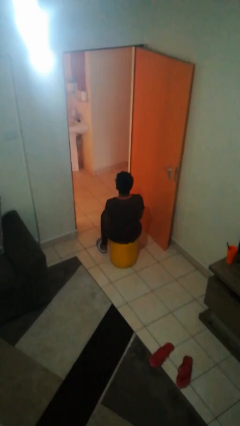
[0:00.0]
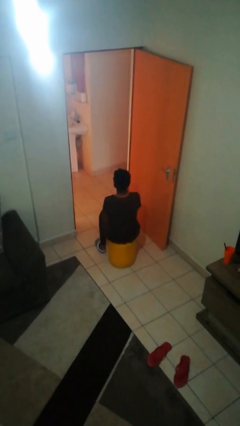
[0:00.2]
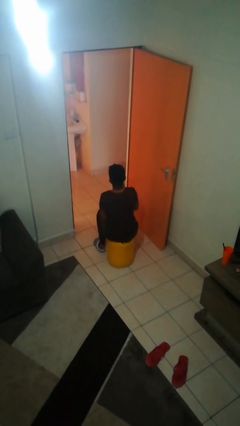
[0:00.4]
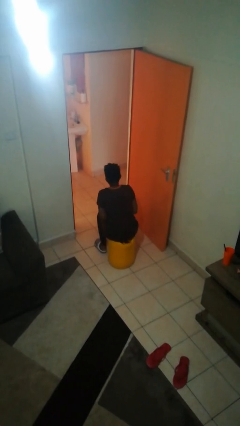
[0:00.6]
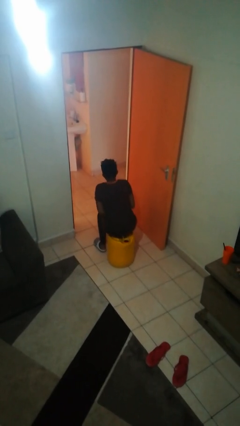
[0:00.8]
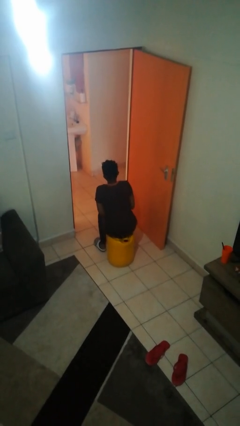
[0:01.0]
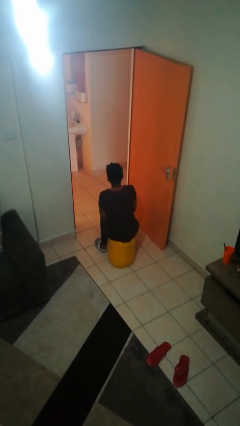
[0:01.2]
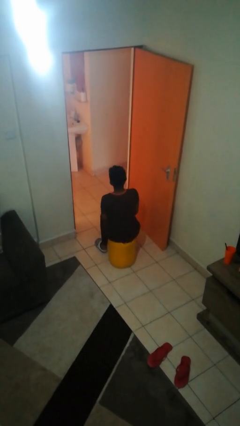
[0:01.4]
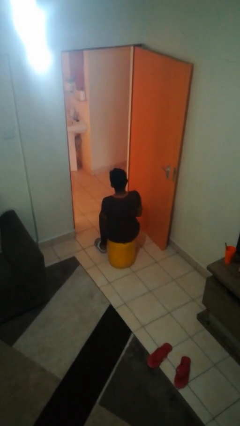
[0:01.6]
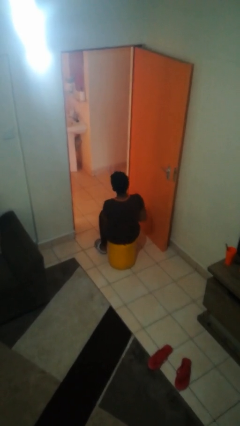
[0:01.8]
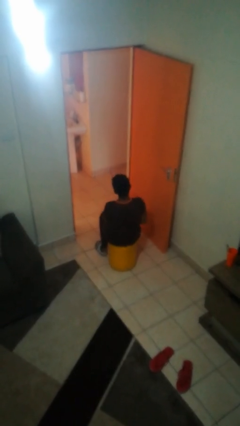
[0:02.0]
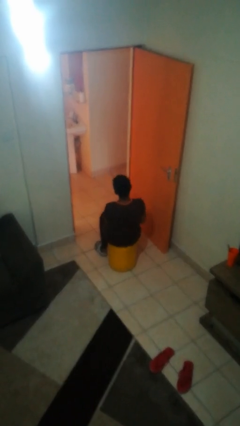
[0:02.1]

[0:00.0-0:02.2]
person slaps hands on thighs

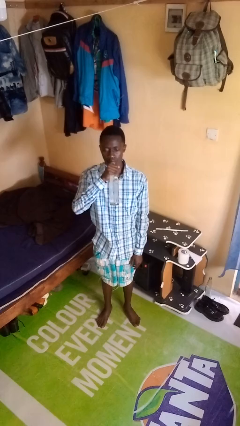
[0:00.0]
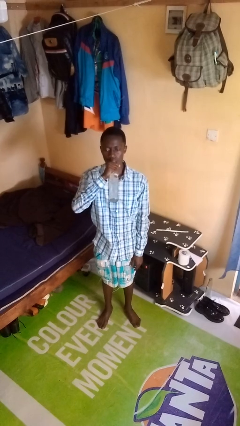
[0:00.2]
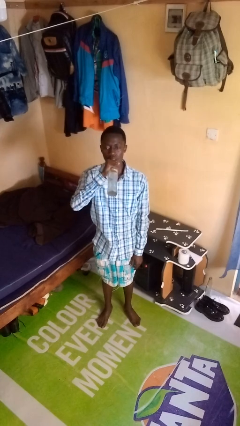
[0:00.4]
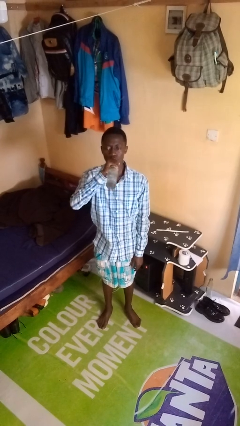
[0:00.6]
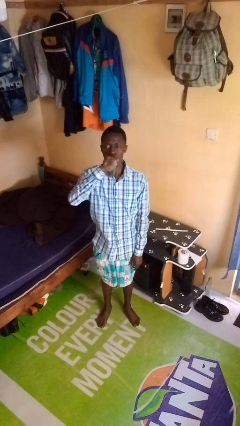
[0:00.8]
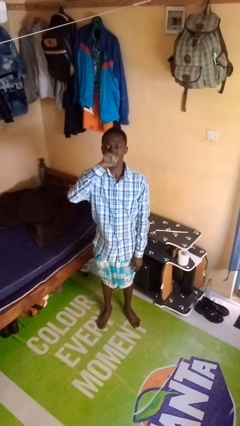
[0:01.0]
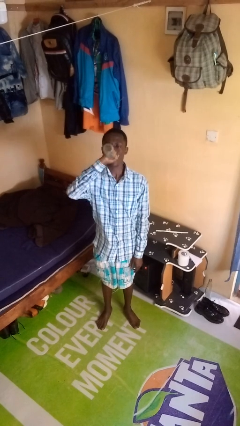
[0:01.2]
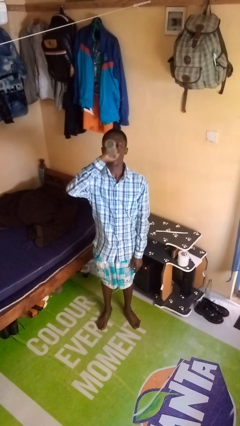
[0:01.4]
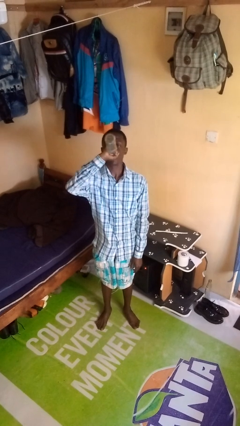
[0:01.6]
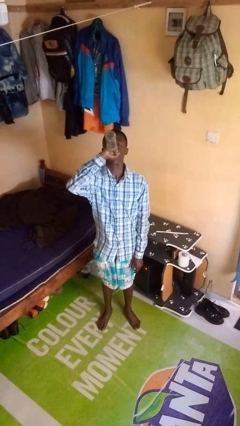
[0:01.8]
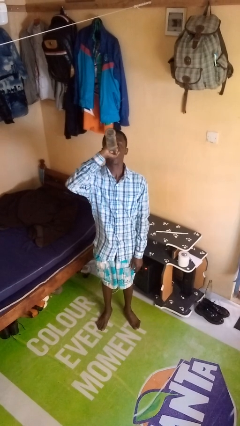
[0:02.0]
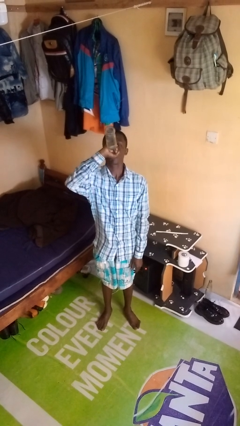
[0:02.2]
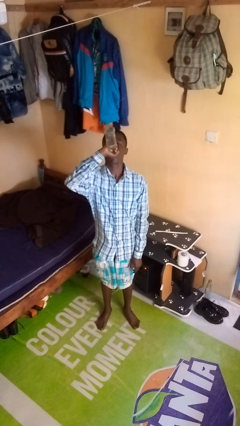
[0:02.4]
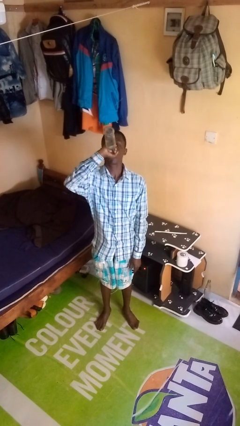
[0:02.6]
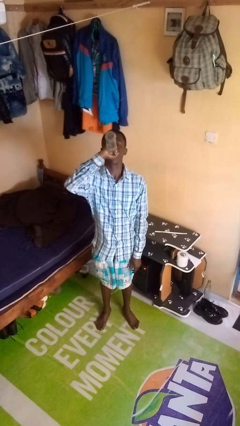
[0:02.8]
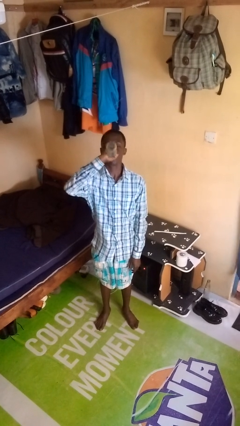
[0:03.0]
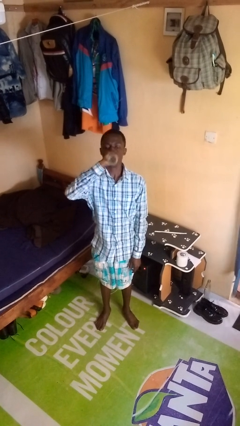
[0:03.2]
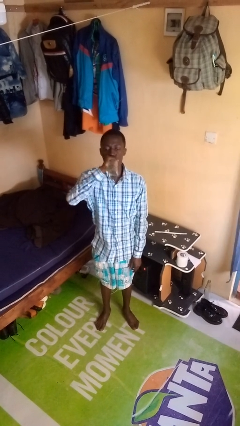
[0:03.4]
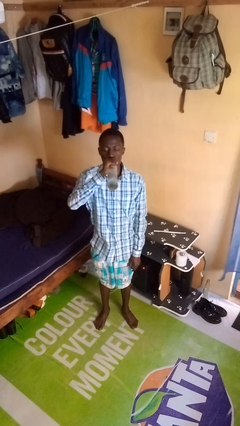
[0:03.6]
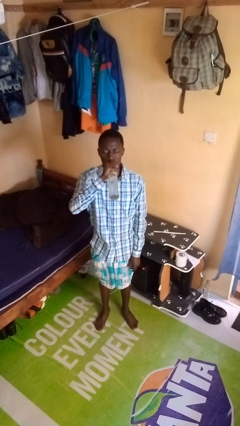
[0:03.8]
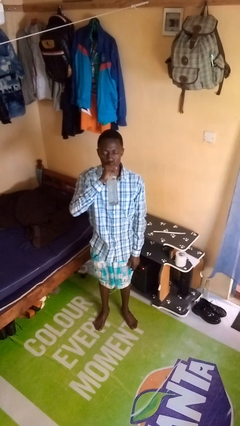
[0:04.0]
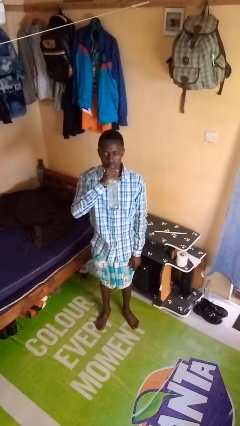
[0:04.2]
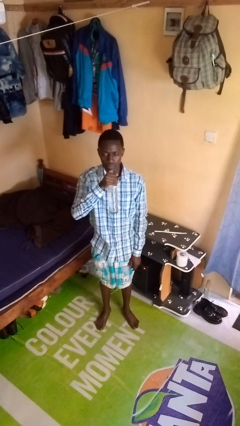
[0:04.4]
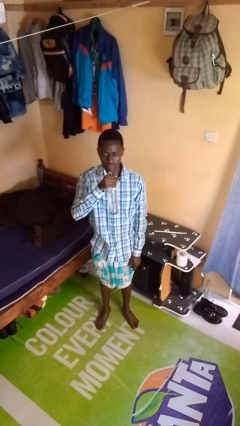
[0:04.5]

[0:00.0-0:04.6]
person drinks from bottle

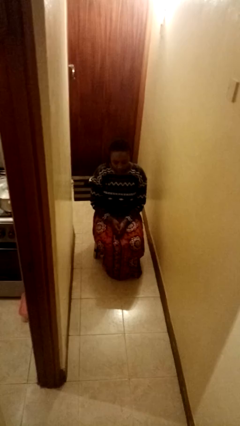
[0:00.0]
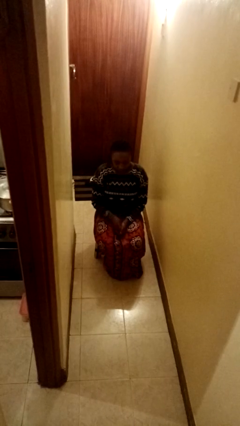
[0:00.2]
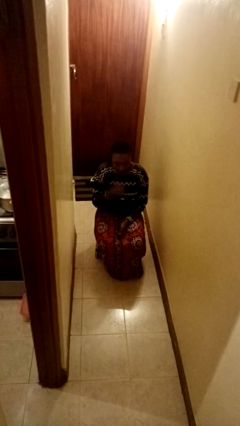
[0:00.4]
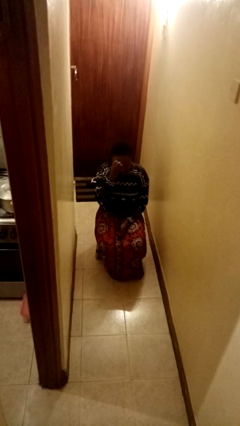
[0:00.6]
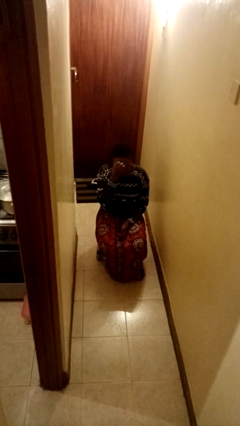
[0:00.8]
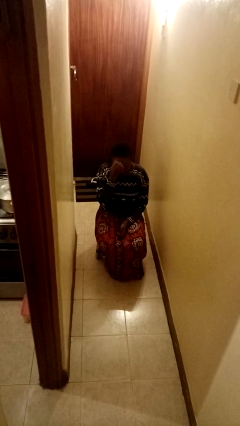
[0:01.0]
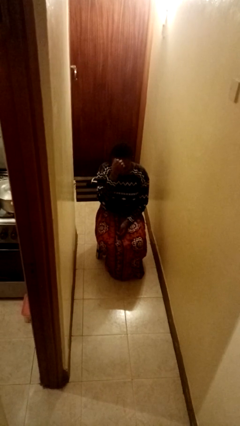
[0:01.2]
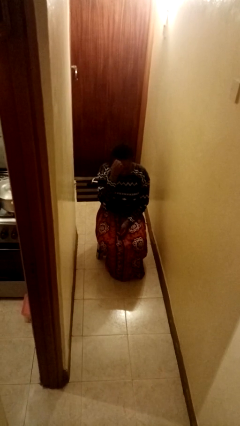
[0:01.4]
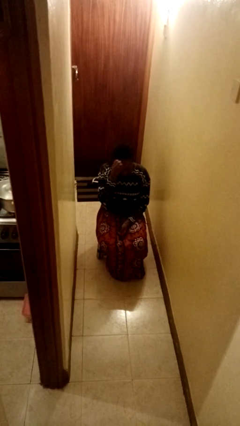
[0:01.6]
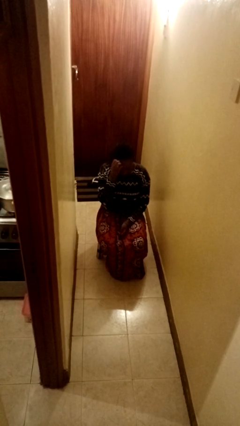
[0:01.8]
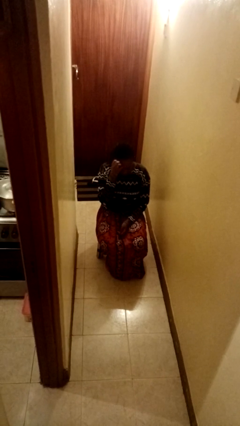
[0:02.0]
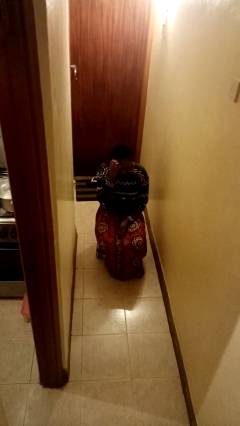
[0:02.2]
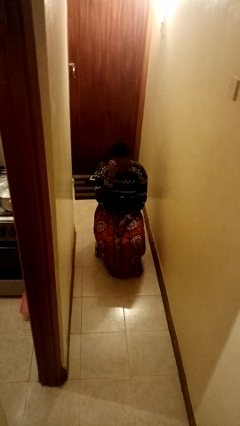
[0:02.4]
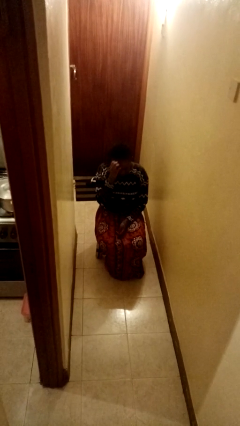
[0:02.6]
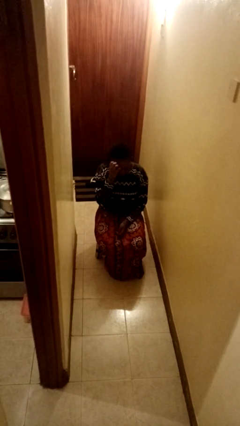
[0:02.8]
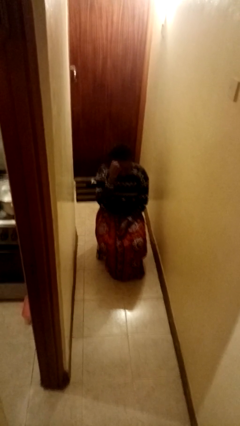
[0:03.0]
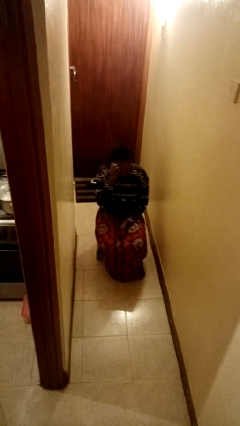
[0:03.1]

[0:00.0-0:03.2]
person scratches face

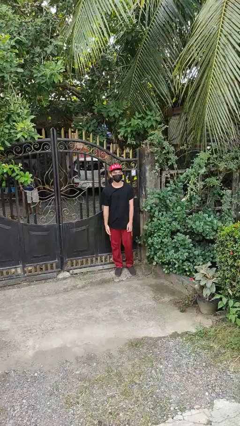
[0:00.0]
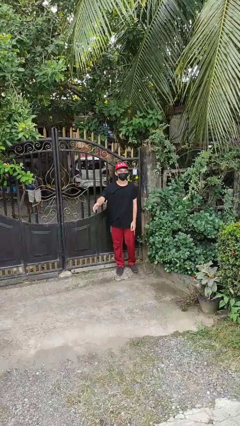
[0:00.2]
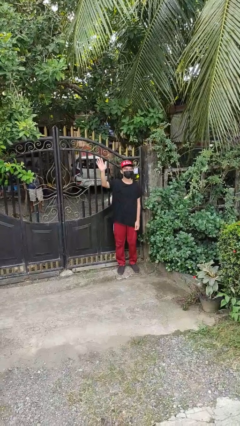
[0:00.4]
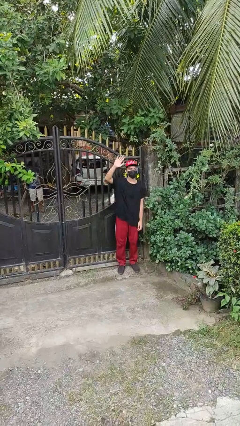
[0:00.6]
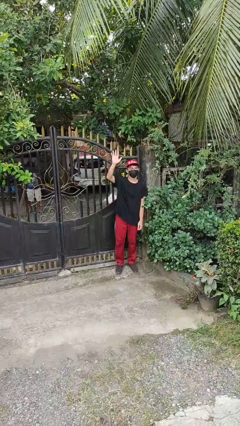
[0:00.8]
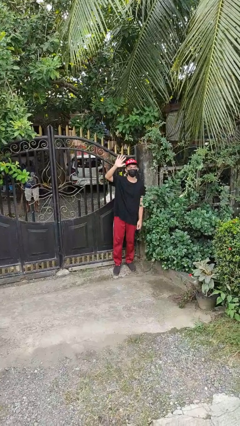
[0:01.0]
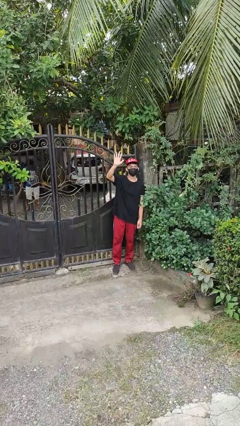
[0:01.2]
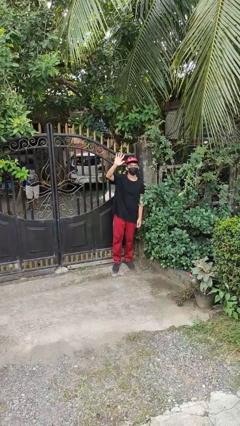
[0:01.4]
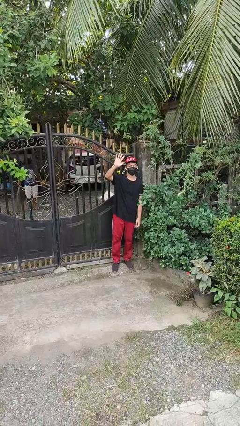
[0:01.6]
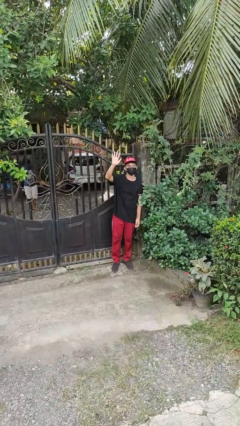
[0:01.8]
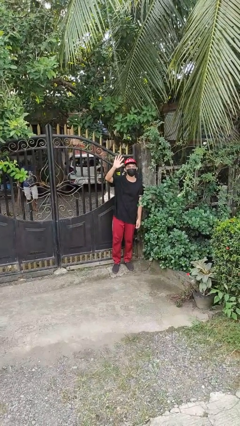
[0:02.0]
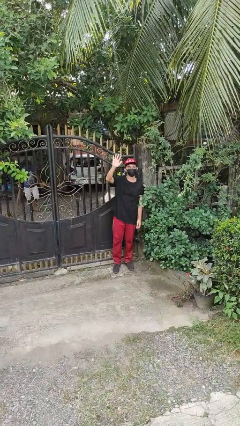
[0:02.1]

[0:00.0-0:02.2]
person waves at person

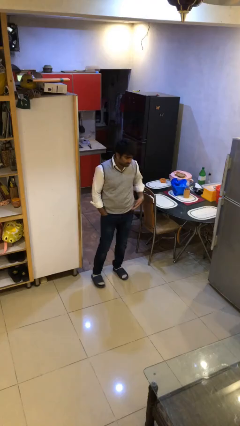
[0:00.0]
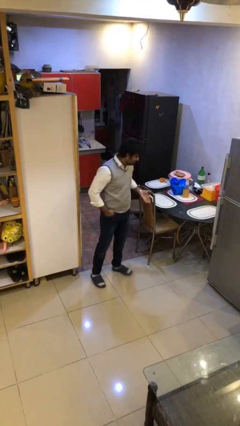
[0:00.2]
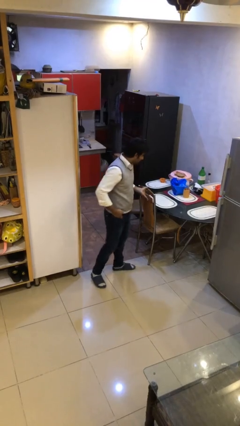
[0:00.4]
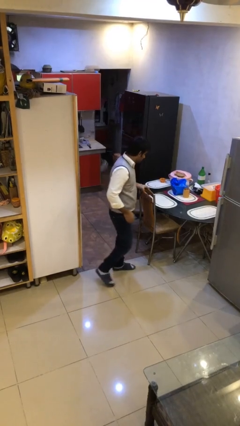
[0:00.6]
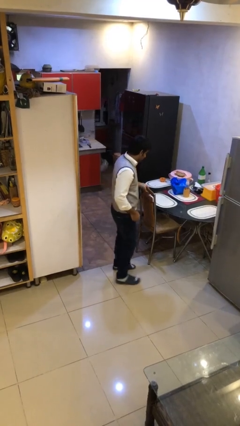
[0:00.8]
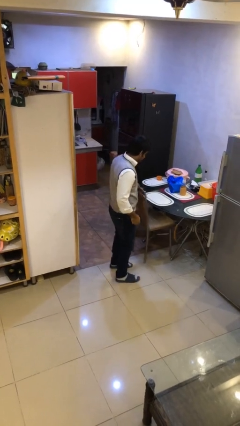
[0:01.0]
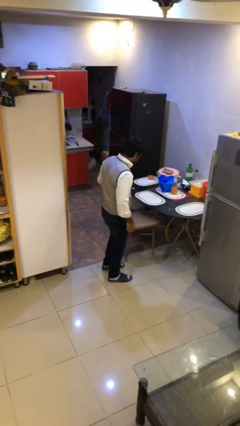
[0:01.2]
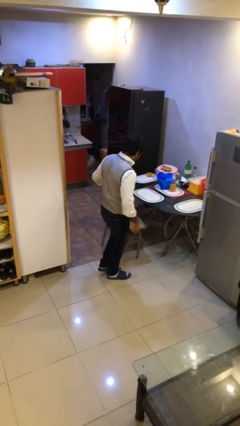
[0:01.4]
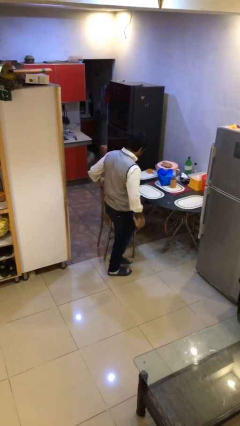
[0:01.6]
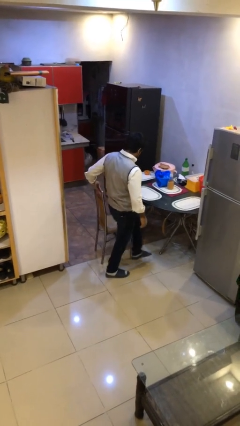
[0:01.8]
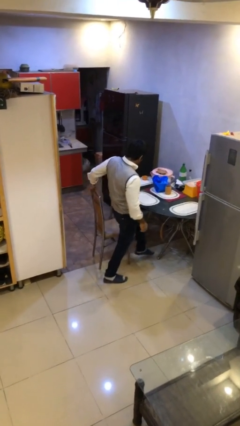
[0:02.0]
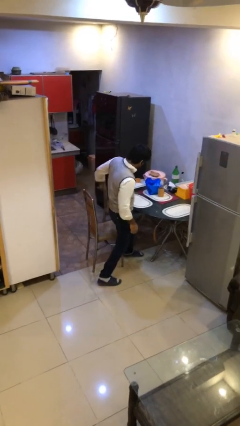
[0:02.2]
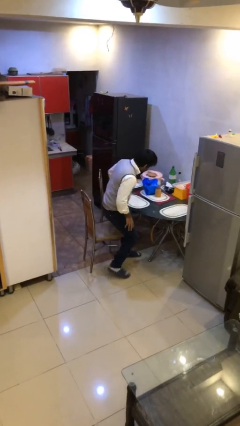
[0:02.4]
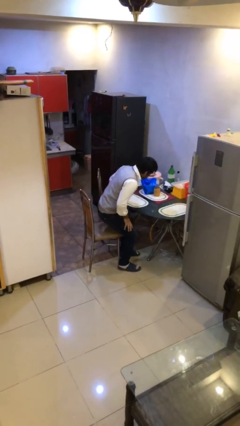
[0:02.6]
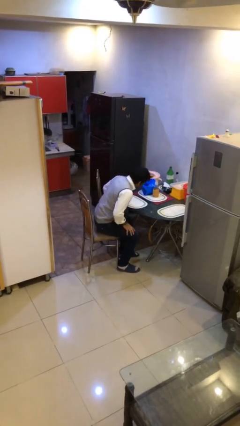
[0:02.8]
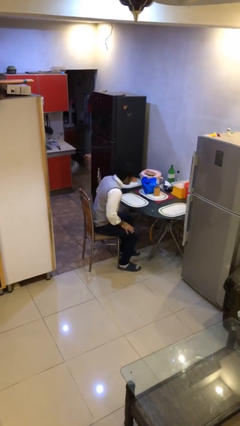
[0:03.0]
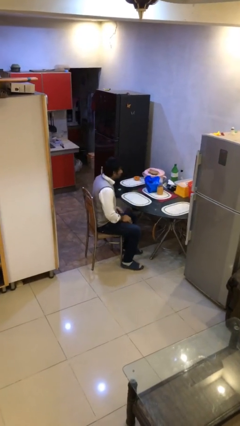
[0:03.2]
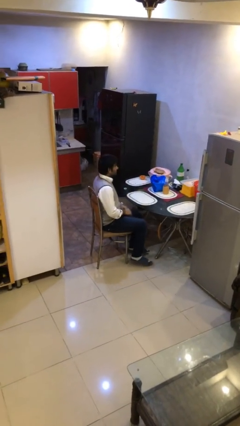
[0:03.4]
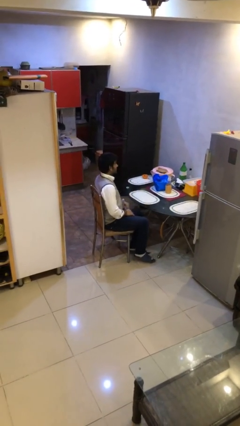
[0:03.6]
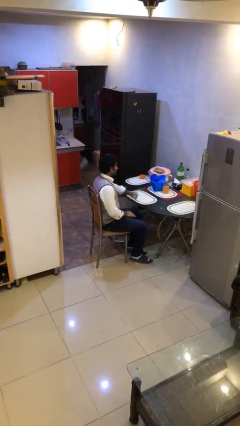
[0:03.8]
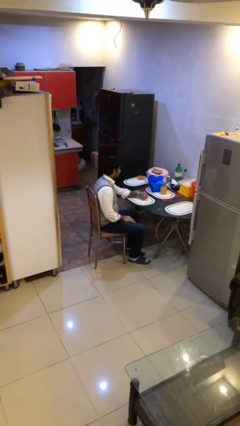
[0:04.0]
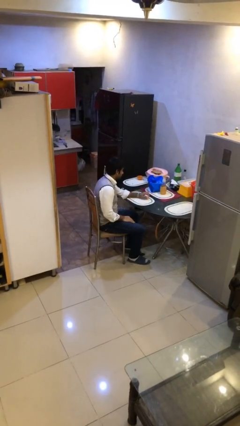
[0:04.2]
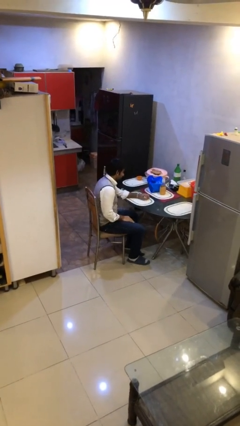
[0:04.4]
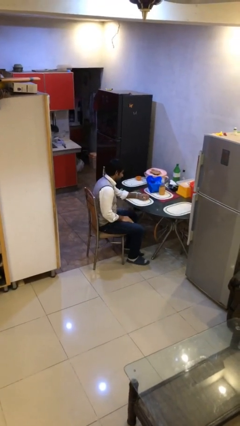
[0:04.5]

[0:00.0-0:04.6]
person sits down

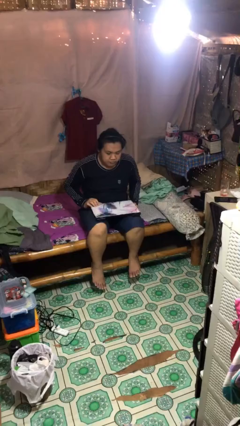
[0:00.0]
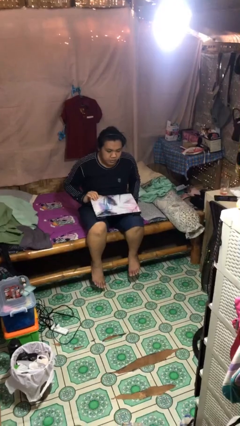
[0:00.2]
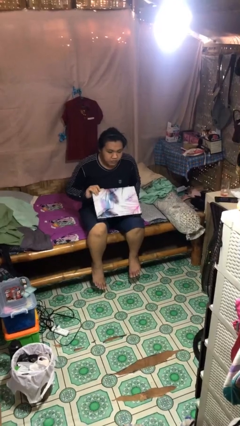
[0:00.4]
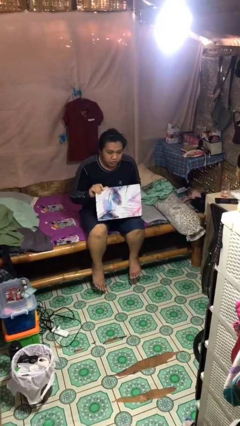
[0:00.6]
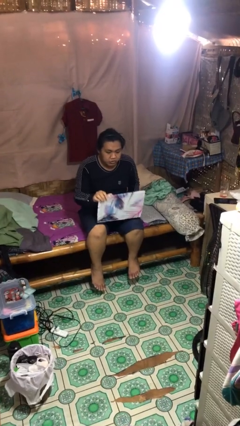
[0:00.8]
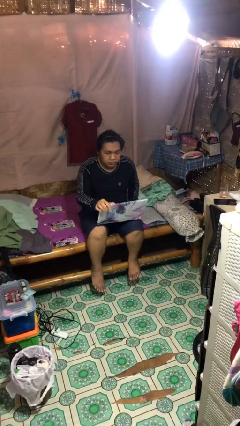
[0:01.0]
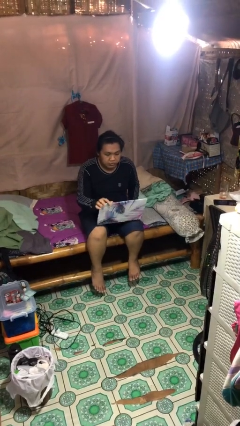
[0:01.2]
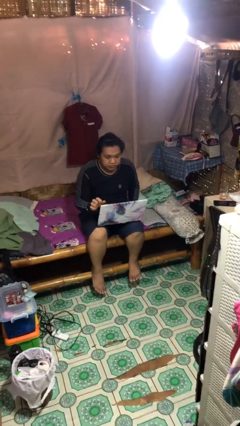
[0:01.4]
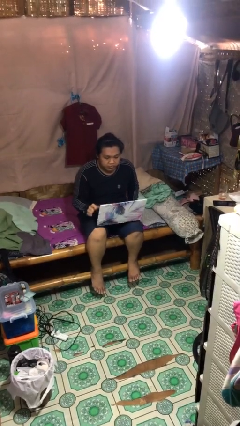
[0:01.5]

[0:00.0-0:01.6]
person opens laptop
